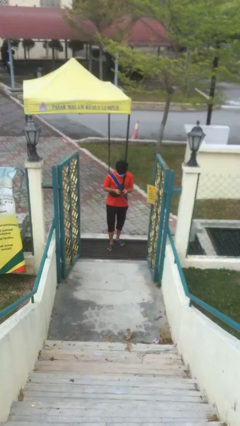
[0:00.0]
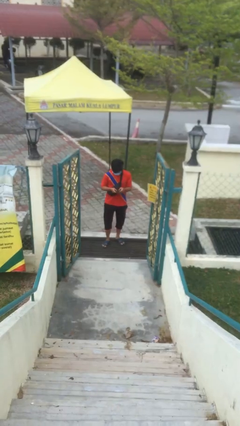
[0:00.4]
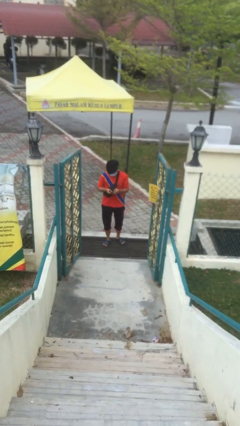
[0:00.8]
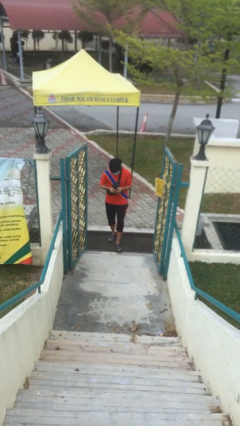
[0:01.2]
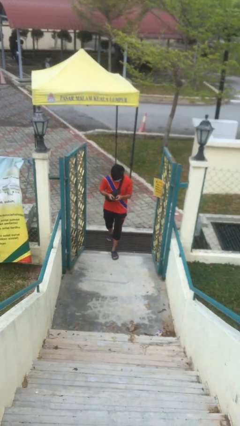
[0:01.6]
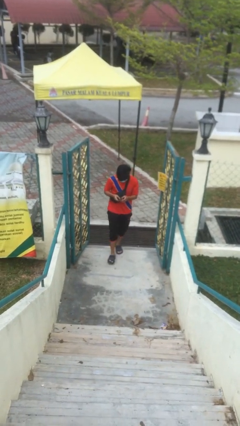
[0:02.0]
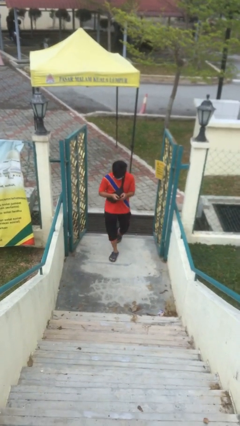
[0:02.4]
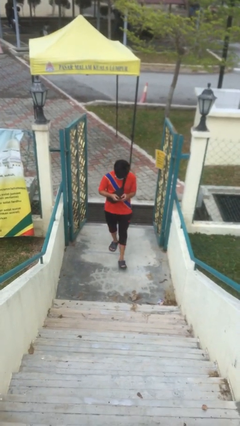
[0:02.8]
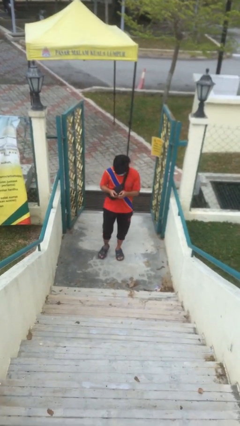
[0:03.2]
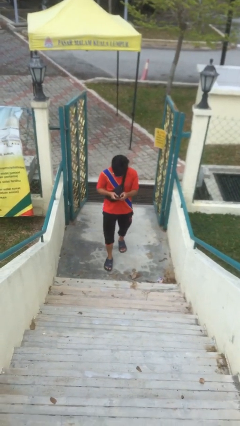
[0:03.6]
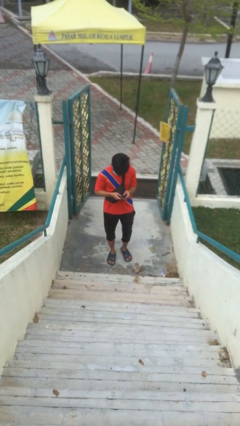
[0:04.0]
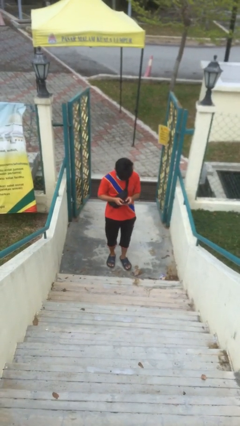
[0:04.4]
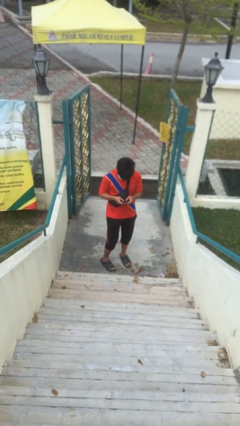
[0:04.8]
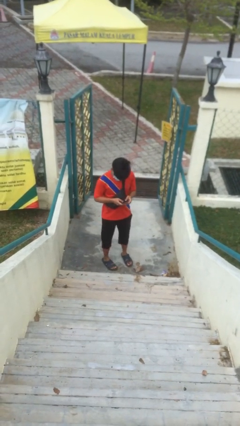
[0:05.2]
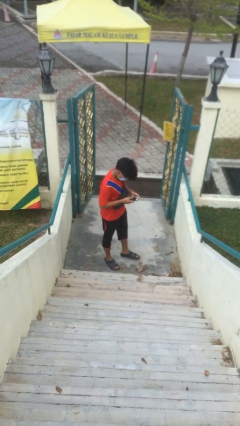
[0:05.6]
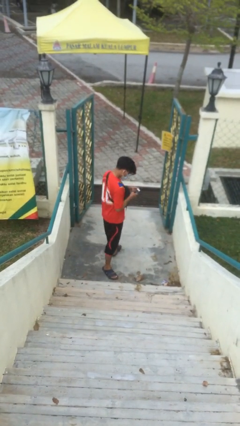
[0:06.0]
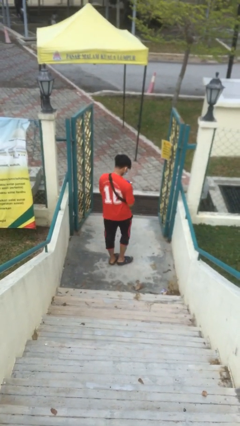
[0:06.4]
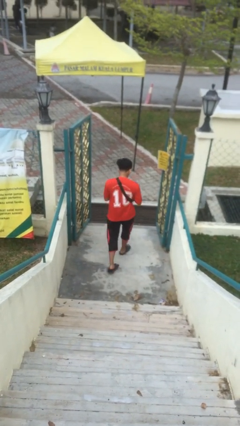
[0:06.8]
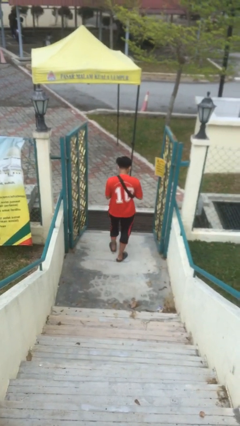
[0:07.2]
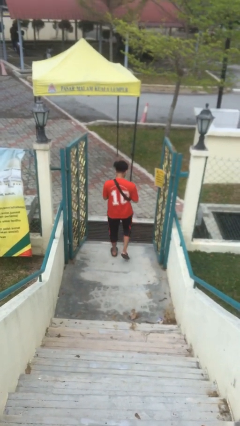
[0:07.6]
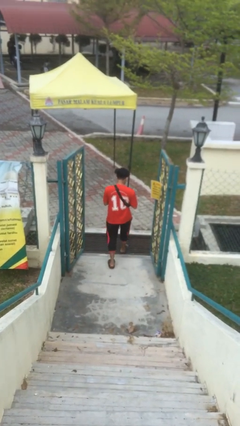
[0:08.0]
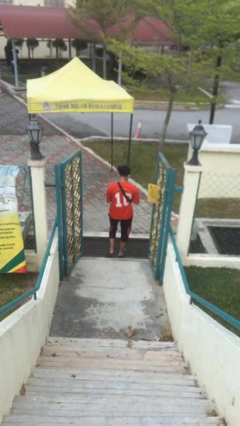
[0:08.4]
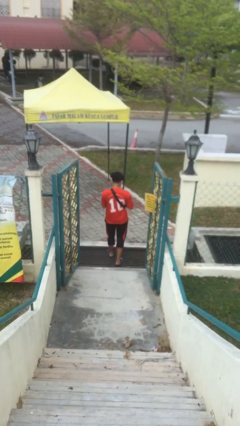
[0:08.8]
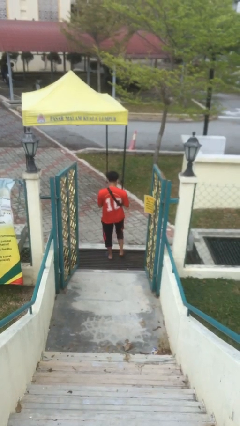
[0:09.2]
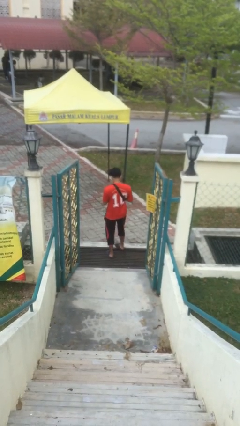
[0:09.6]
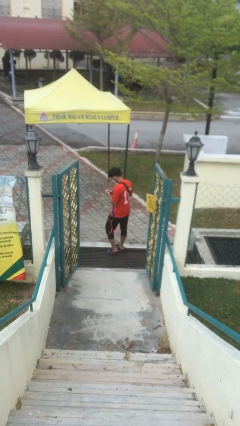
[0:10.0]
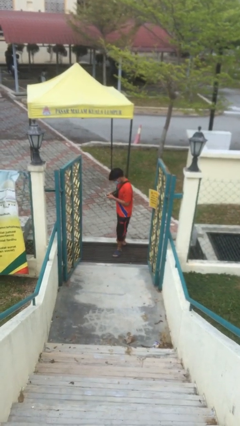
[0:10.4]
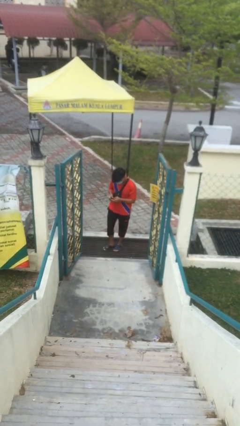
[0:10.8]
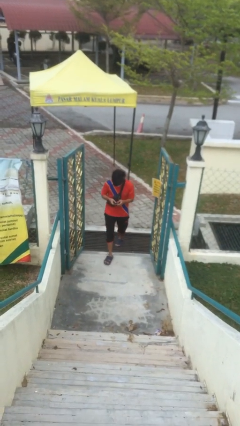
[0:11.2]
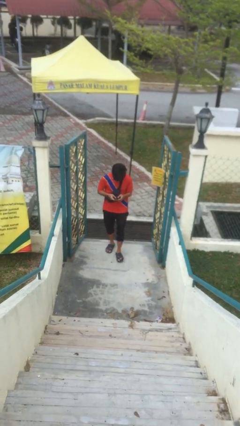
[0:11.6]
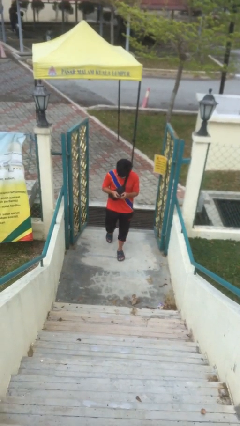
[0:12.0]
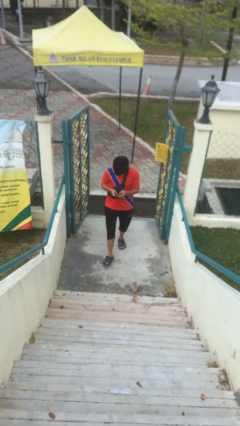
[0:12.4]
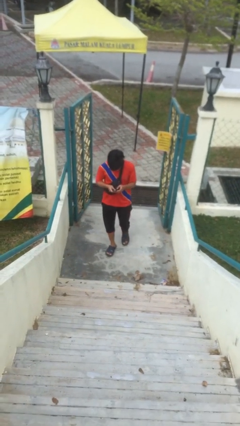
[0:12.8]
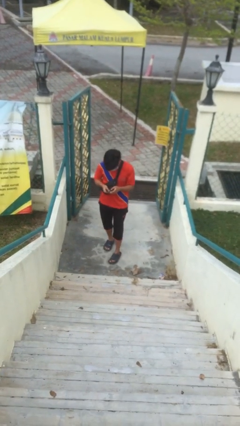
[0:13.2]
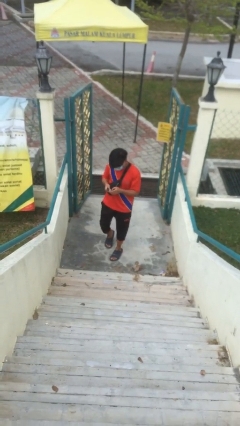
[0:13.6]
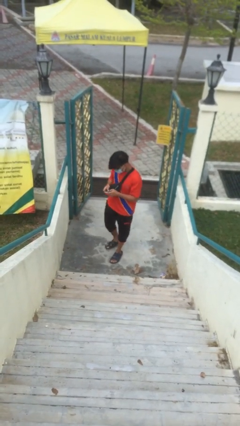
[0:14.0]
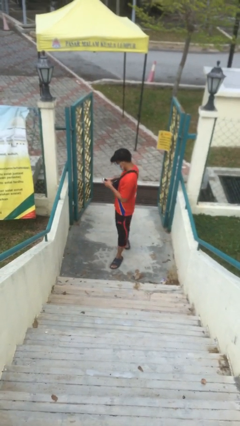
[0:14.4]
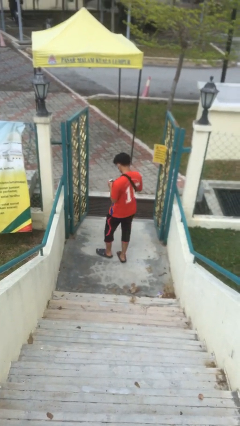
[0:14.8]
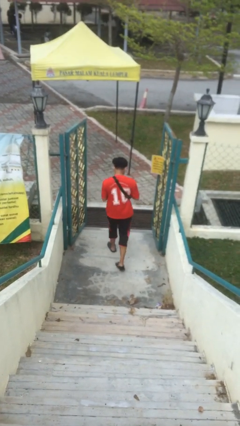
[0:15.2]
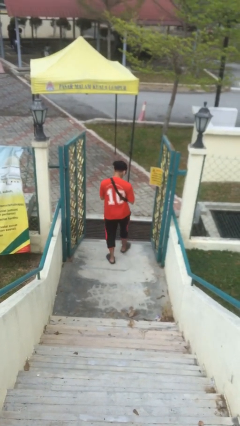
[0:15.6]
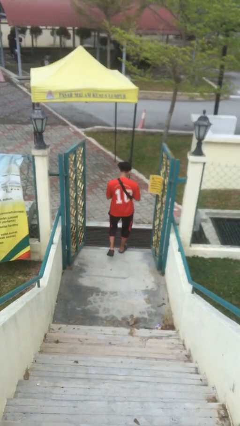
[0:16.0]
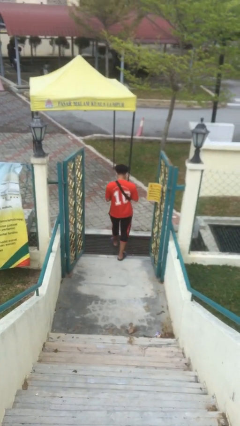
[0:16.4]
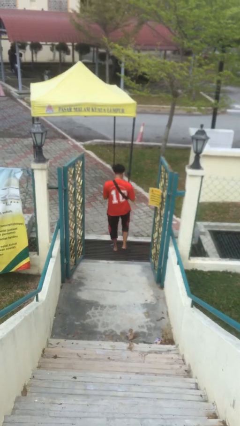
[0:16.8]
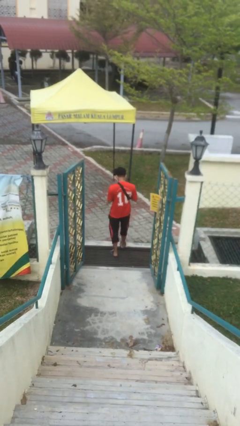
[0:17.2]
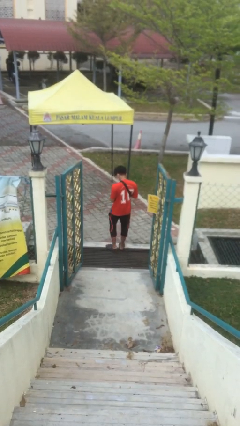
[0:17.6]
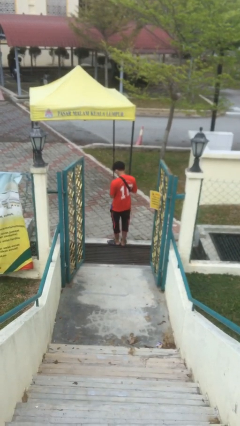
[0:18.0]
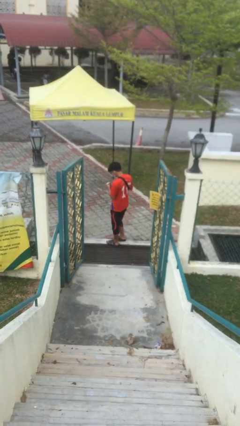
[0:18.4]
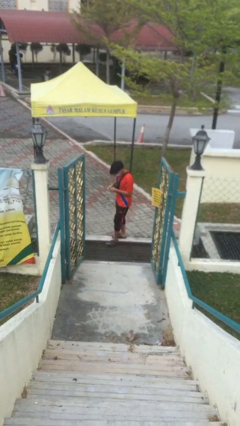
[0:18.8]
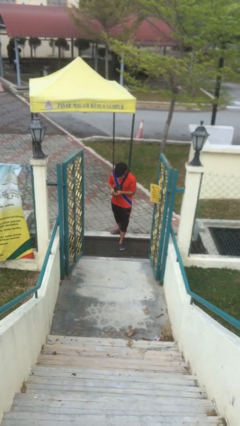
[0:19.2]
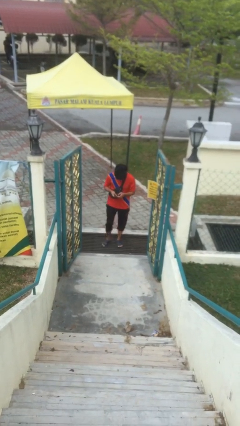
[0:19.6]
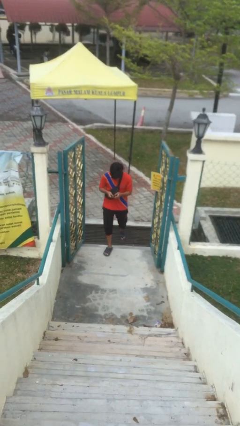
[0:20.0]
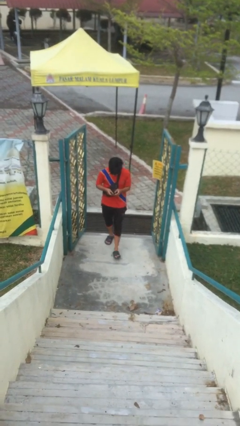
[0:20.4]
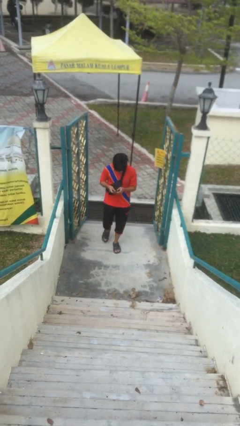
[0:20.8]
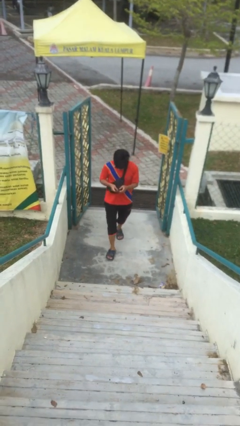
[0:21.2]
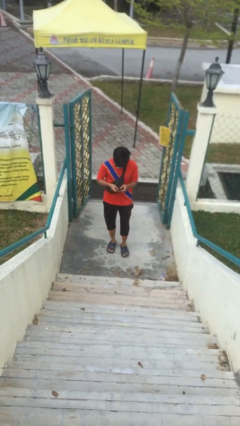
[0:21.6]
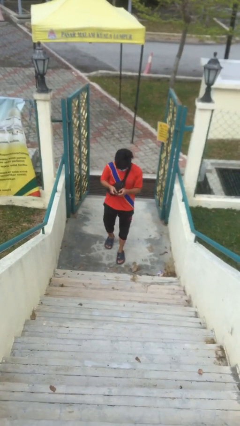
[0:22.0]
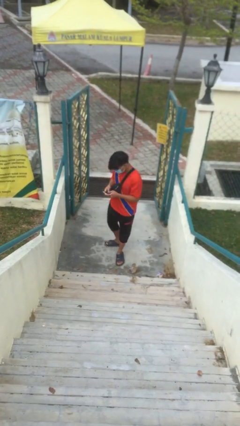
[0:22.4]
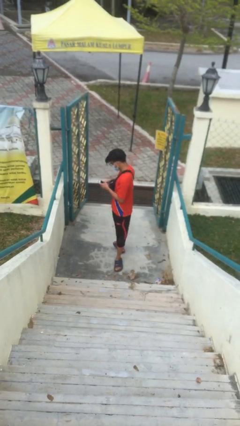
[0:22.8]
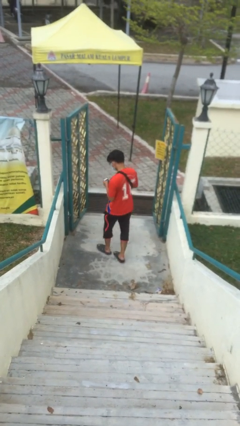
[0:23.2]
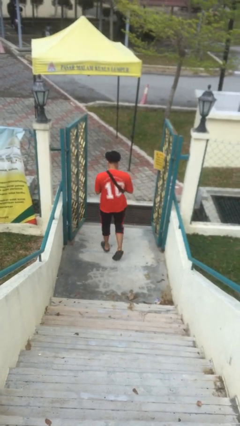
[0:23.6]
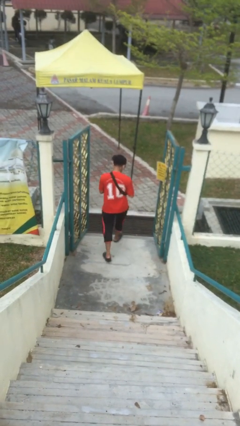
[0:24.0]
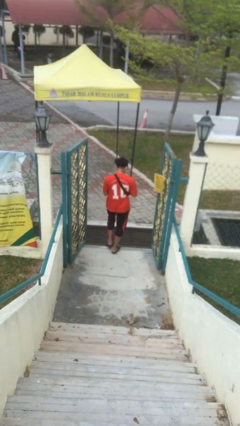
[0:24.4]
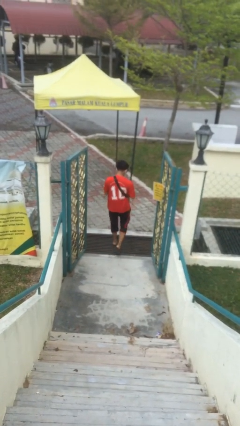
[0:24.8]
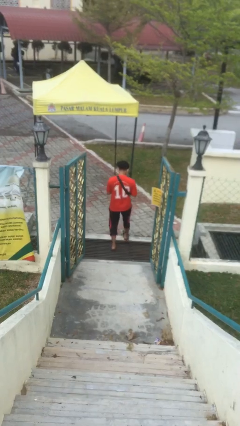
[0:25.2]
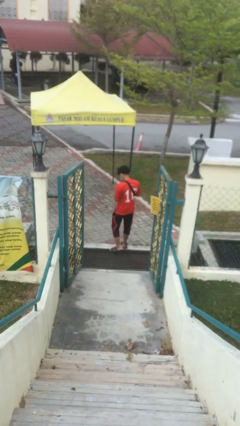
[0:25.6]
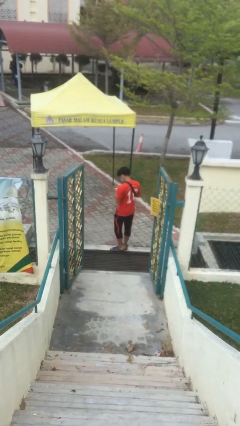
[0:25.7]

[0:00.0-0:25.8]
person texts on phone

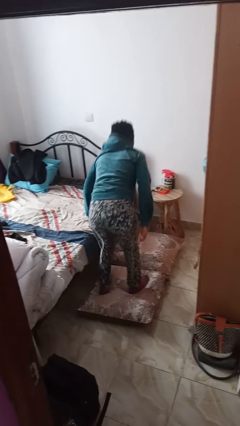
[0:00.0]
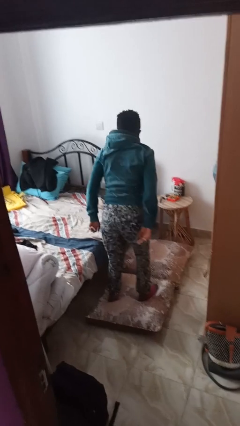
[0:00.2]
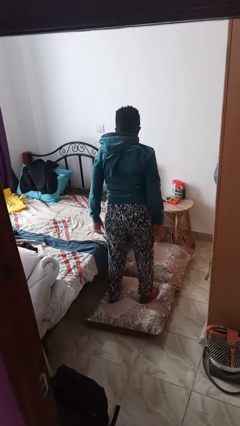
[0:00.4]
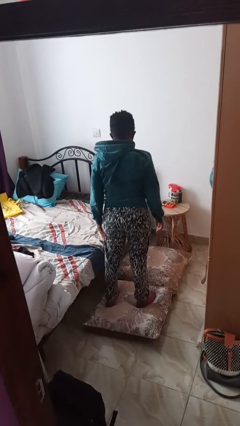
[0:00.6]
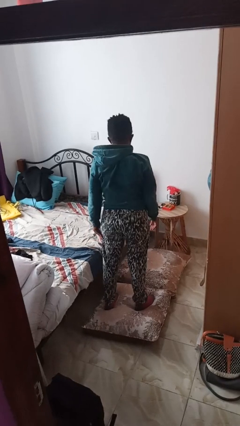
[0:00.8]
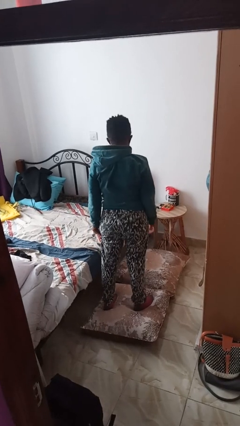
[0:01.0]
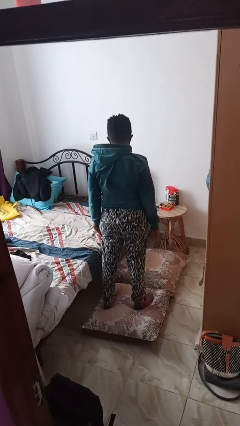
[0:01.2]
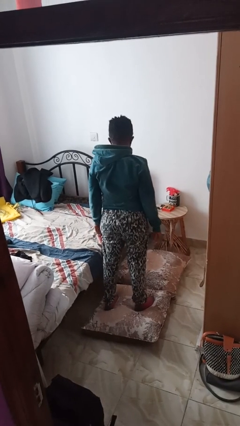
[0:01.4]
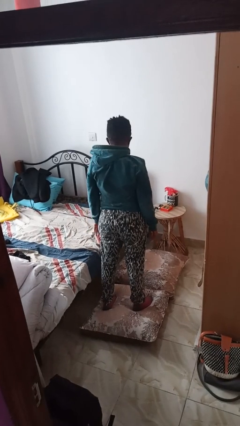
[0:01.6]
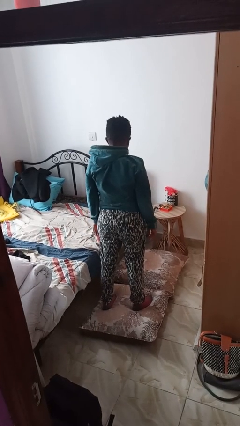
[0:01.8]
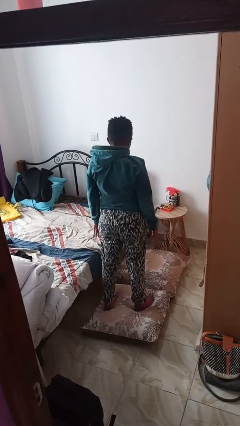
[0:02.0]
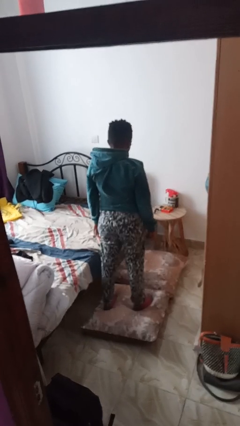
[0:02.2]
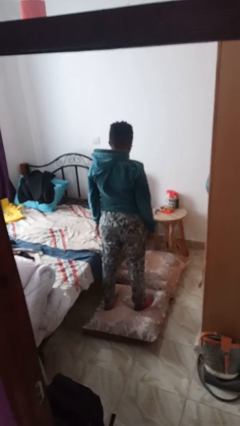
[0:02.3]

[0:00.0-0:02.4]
person stands up from floor

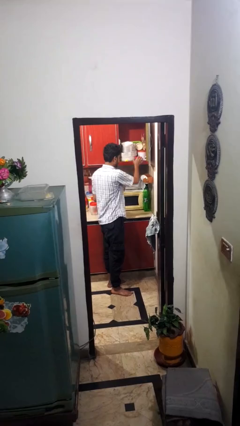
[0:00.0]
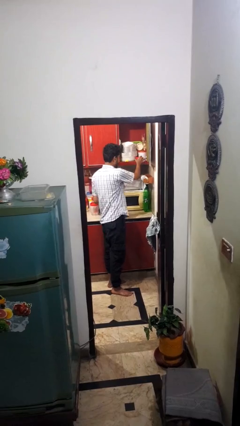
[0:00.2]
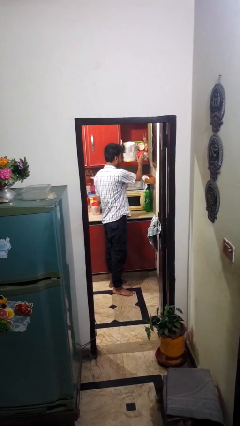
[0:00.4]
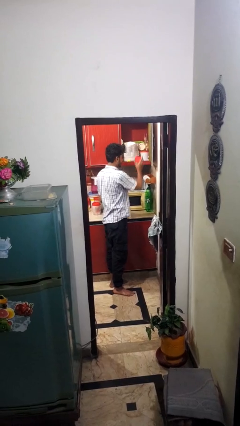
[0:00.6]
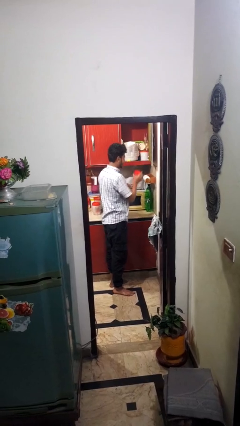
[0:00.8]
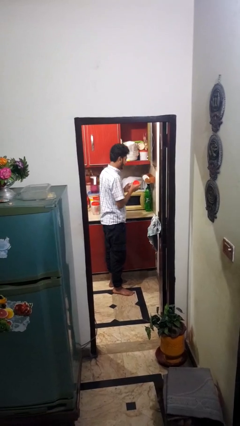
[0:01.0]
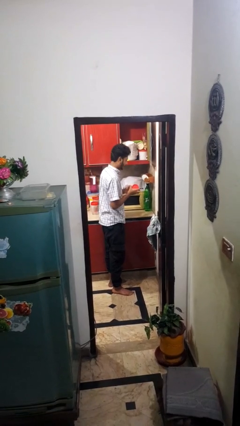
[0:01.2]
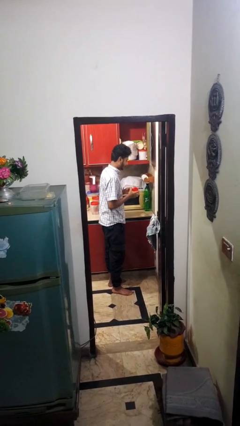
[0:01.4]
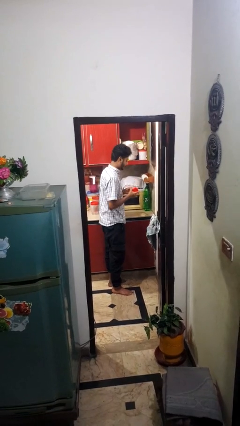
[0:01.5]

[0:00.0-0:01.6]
person picks up object from cabinet

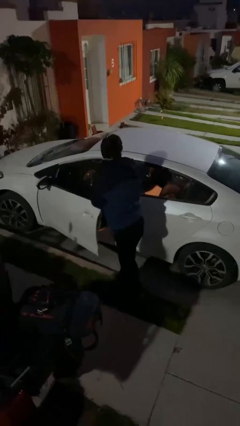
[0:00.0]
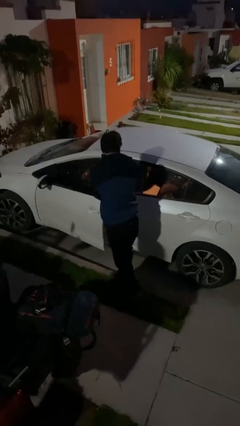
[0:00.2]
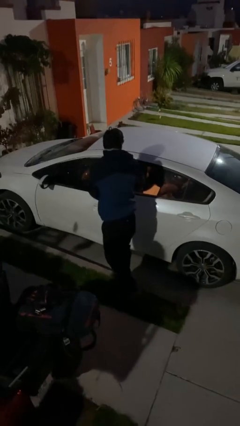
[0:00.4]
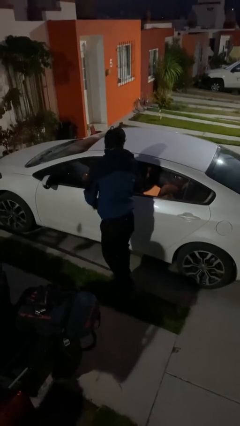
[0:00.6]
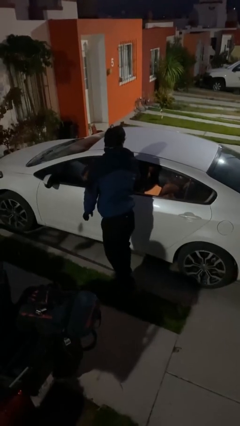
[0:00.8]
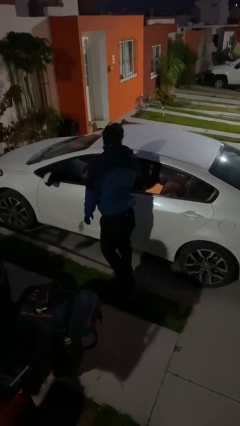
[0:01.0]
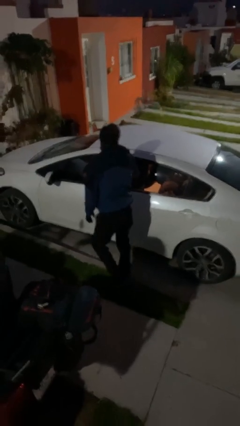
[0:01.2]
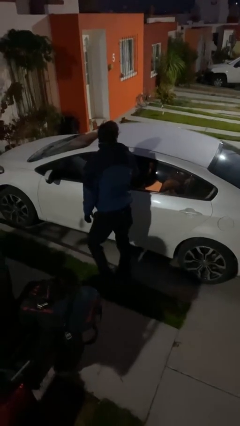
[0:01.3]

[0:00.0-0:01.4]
person closes car door
